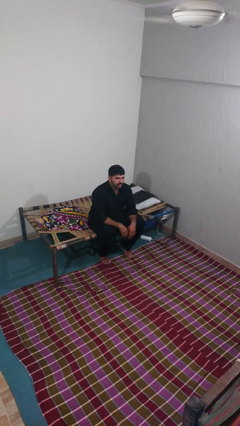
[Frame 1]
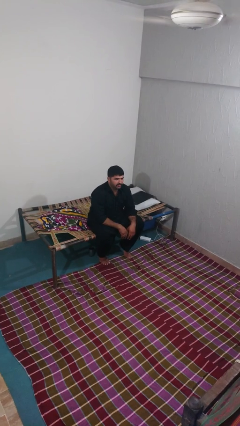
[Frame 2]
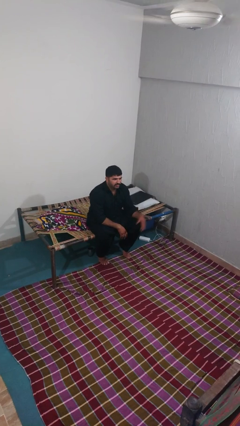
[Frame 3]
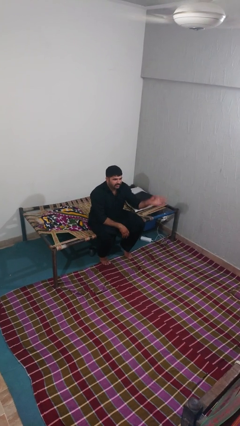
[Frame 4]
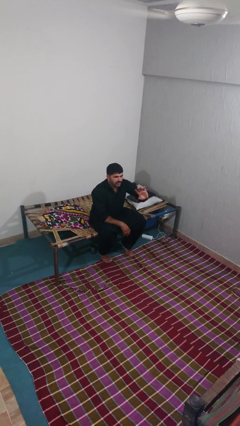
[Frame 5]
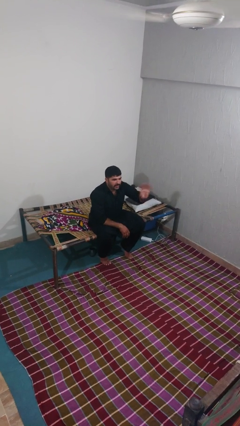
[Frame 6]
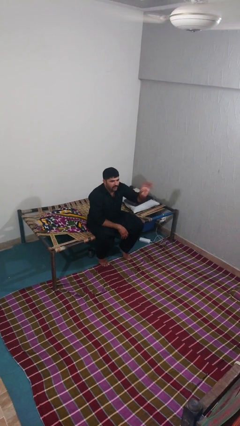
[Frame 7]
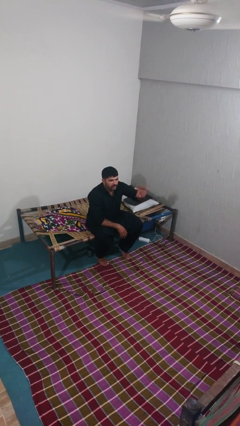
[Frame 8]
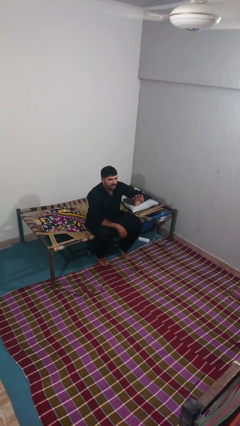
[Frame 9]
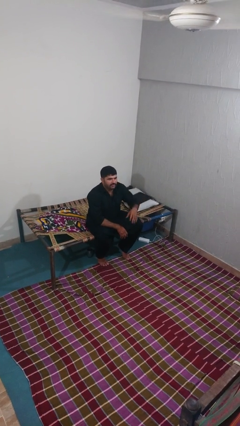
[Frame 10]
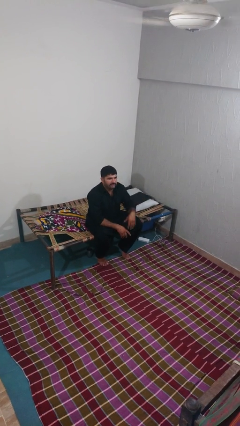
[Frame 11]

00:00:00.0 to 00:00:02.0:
person waves at person

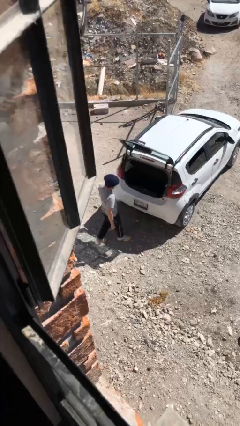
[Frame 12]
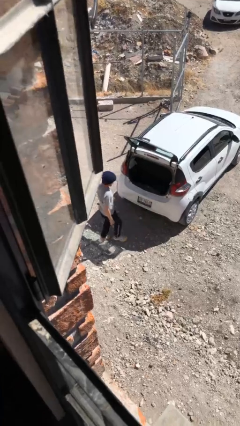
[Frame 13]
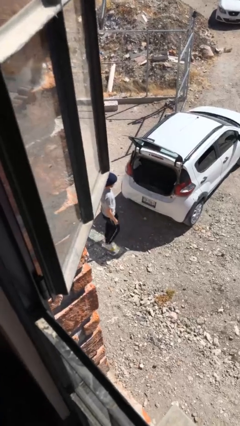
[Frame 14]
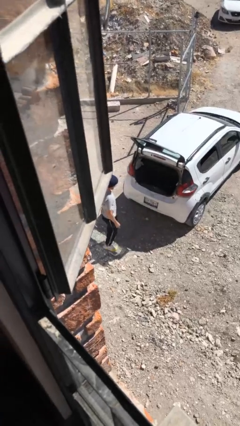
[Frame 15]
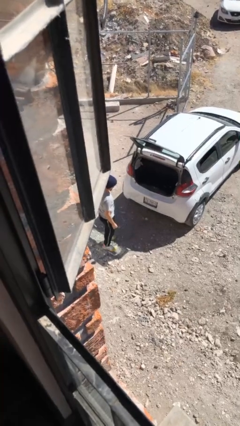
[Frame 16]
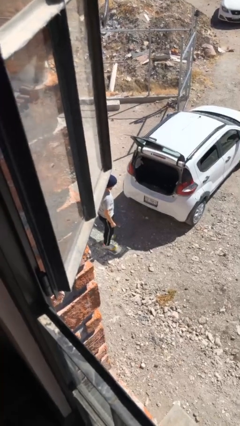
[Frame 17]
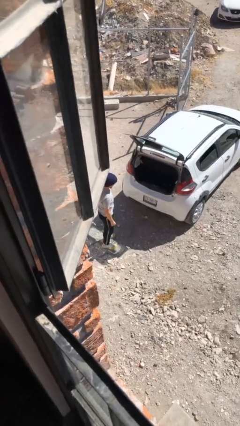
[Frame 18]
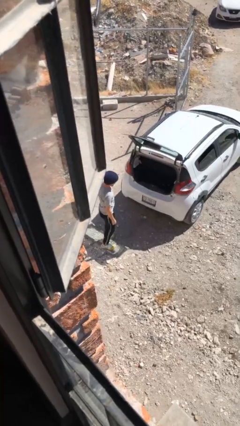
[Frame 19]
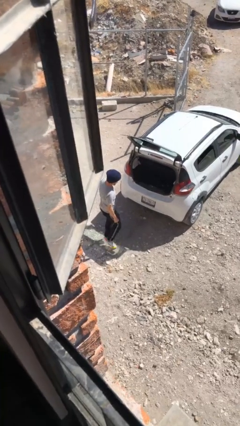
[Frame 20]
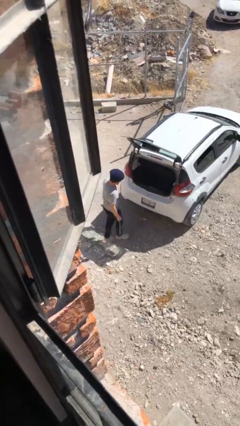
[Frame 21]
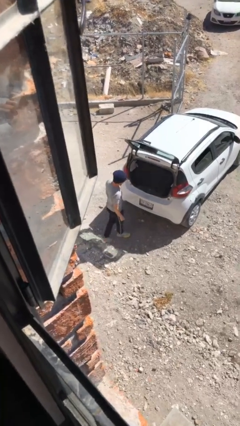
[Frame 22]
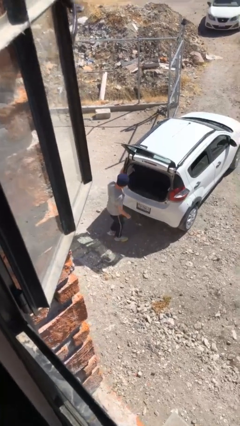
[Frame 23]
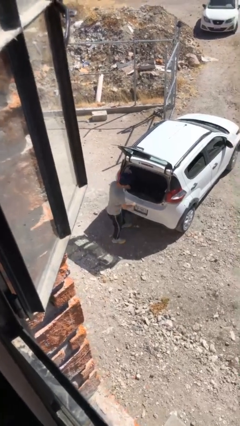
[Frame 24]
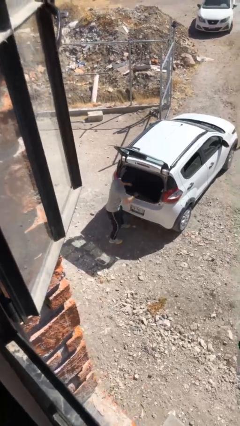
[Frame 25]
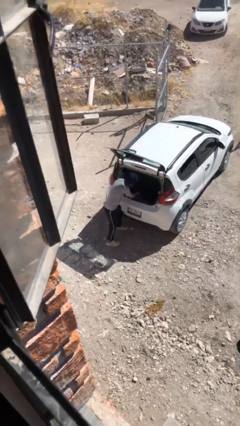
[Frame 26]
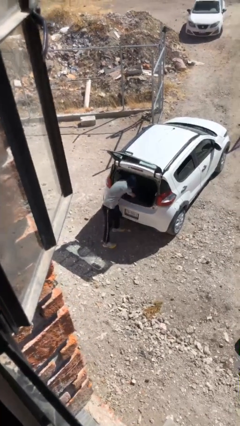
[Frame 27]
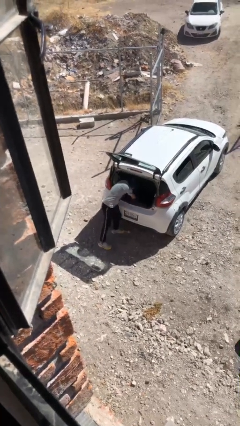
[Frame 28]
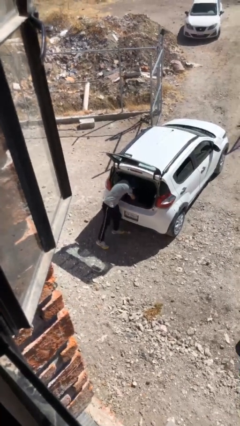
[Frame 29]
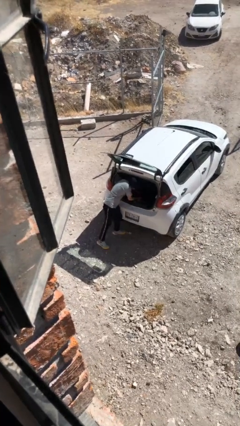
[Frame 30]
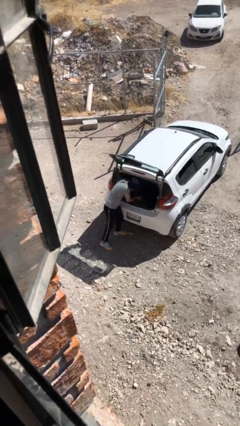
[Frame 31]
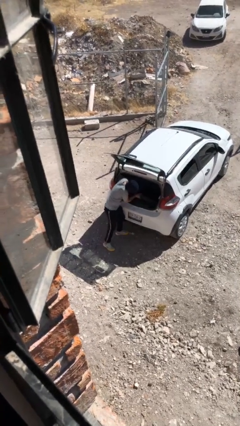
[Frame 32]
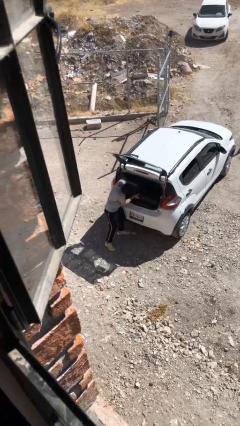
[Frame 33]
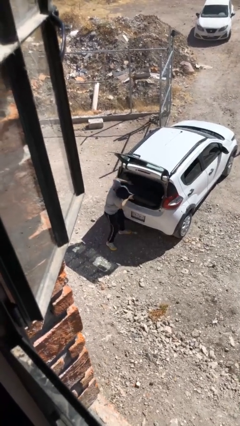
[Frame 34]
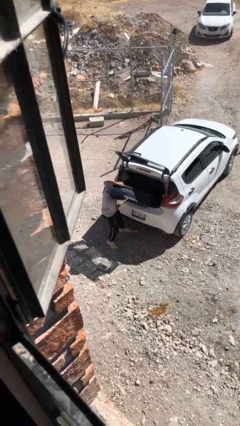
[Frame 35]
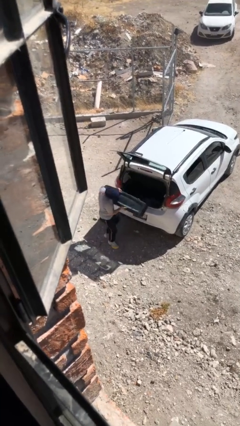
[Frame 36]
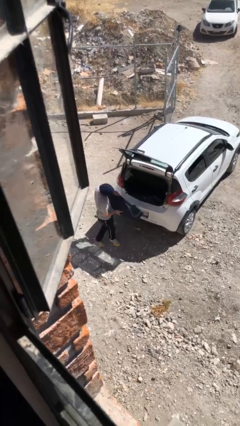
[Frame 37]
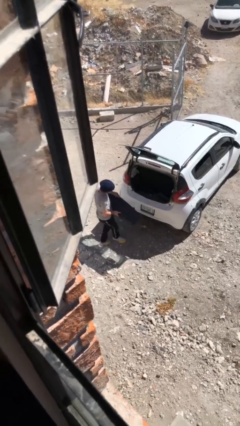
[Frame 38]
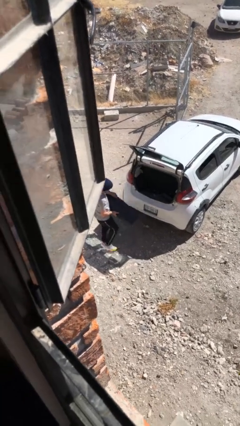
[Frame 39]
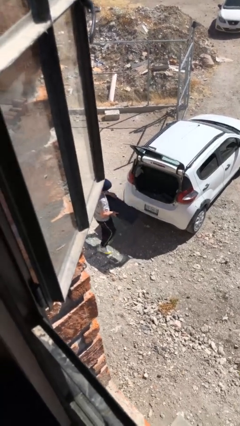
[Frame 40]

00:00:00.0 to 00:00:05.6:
person unloads car

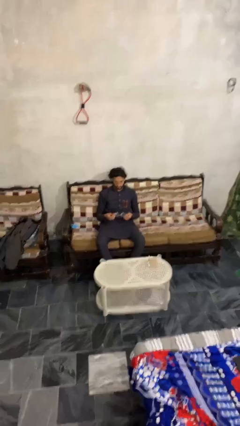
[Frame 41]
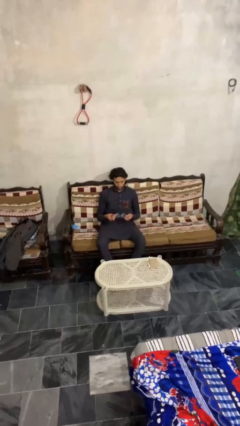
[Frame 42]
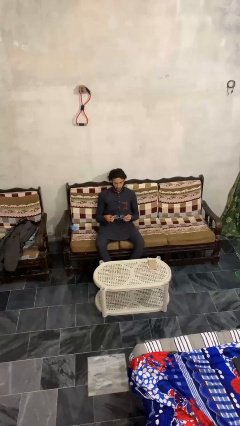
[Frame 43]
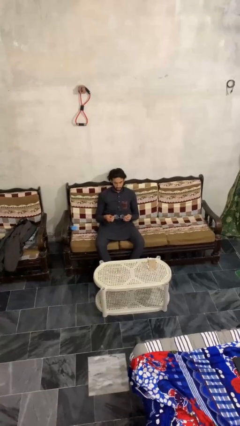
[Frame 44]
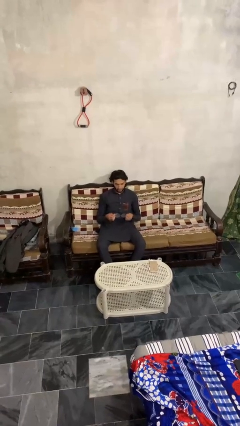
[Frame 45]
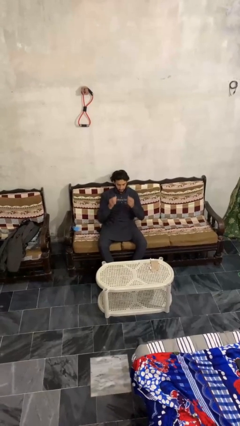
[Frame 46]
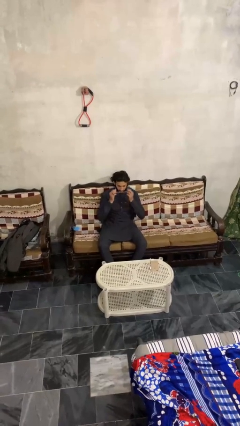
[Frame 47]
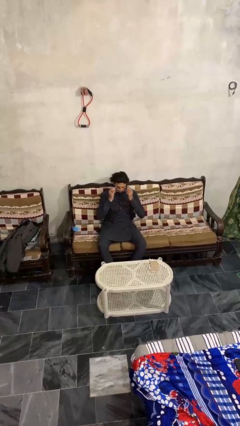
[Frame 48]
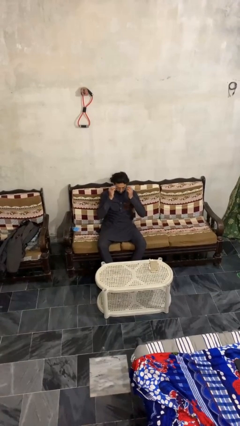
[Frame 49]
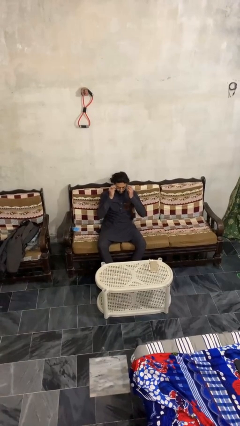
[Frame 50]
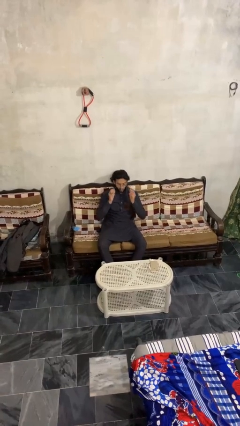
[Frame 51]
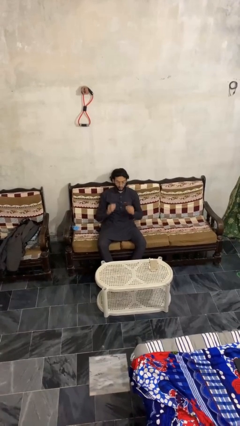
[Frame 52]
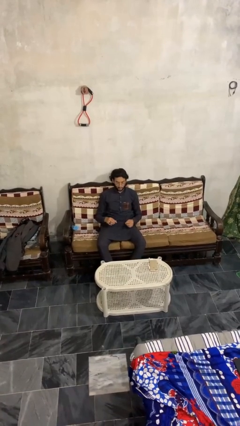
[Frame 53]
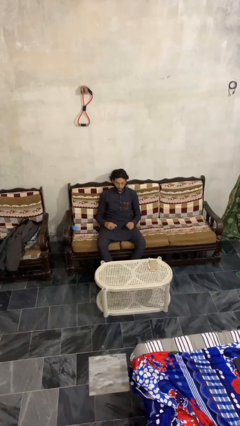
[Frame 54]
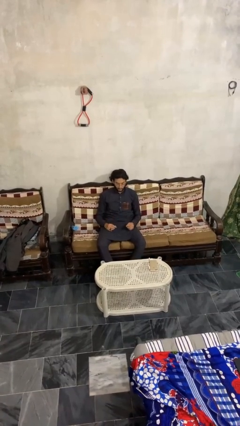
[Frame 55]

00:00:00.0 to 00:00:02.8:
person puts on glasses

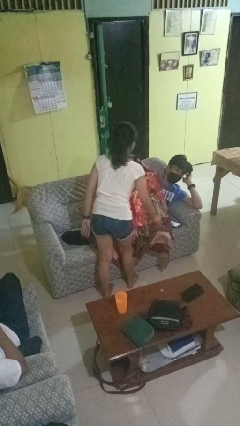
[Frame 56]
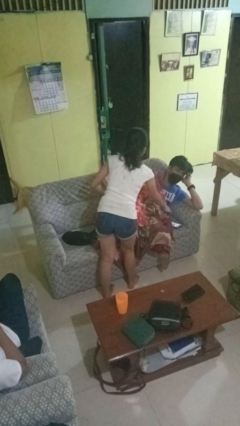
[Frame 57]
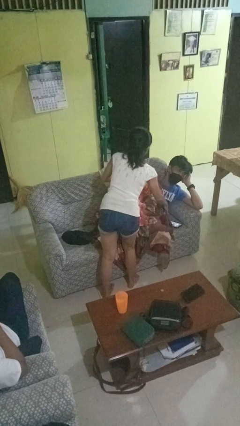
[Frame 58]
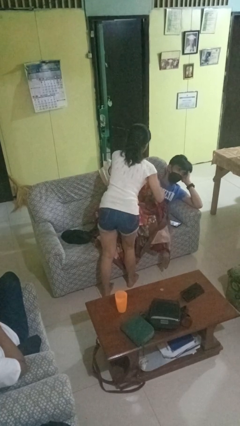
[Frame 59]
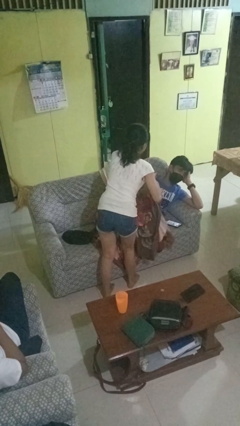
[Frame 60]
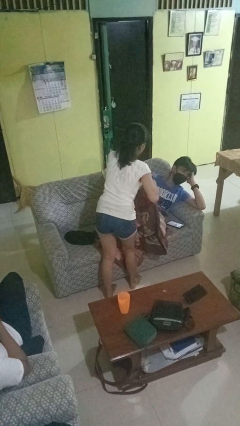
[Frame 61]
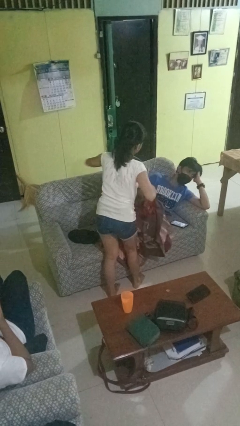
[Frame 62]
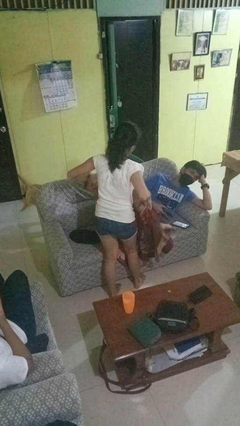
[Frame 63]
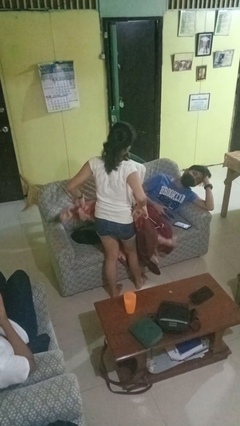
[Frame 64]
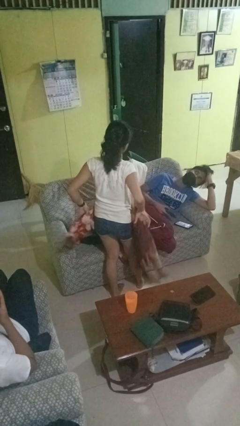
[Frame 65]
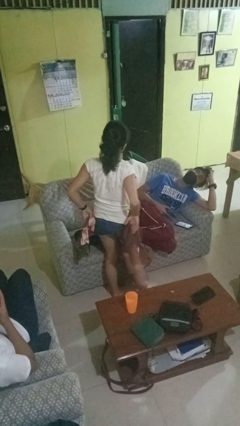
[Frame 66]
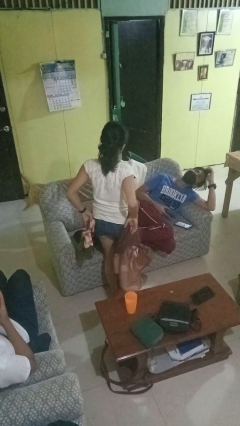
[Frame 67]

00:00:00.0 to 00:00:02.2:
person uncovers friend with blanket

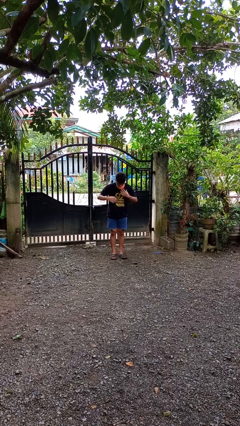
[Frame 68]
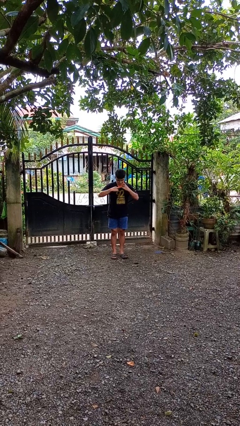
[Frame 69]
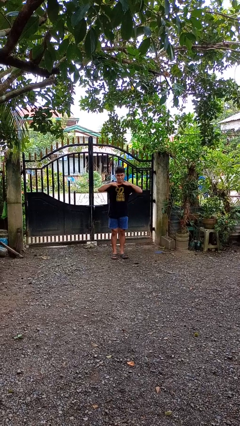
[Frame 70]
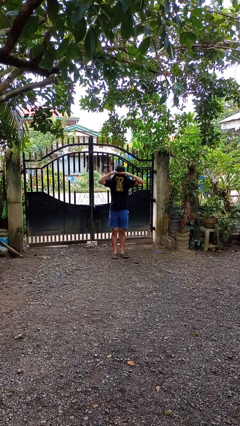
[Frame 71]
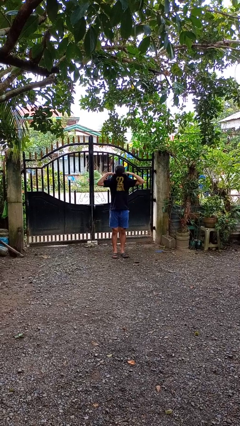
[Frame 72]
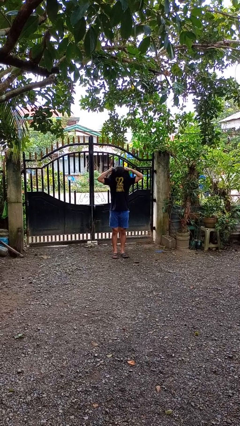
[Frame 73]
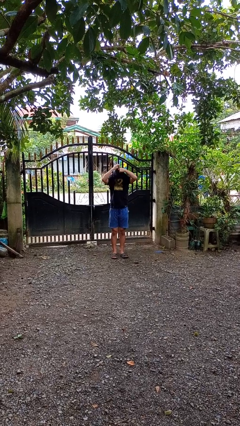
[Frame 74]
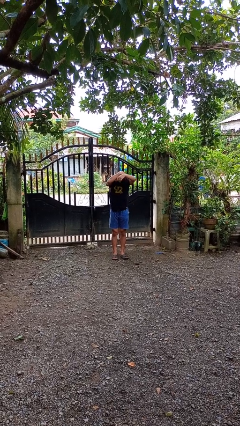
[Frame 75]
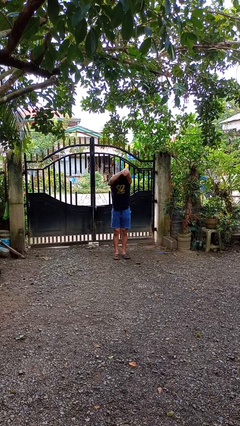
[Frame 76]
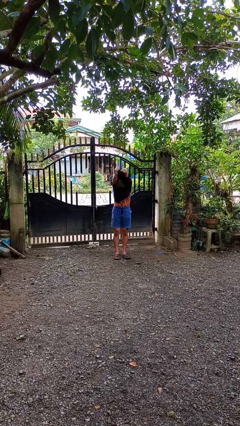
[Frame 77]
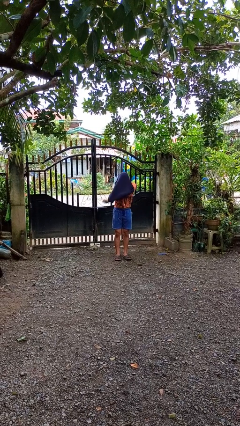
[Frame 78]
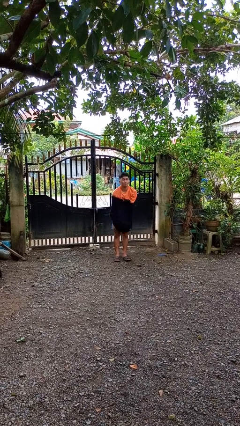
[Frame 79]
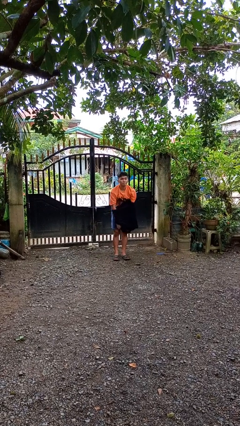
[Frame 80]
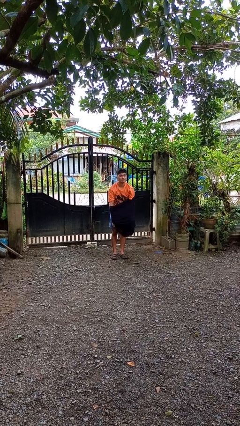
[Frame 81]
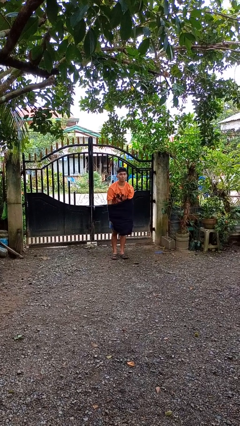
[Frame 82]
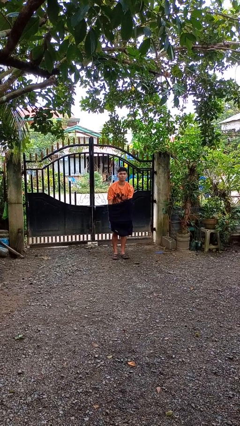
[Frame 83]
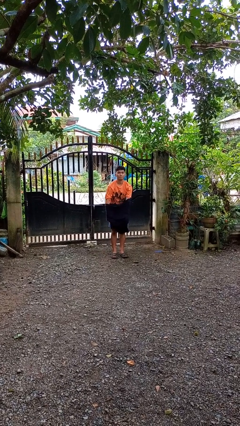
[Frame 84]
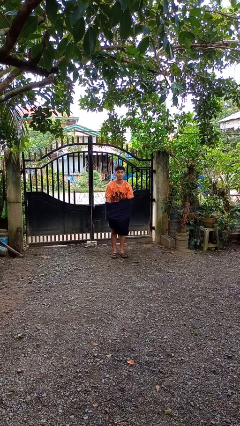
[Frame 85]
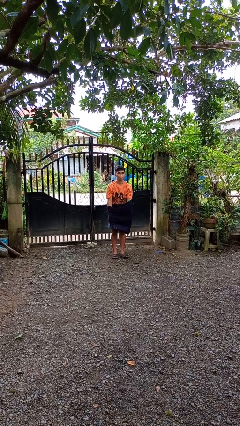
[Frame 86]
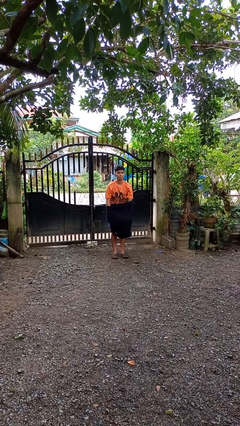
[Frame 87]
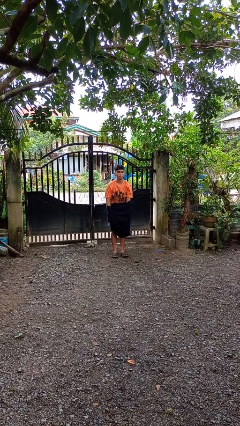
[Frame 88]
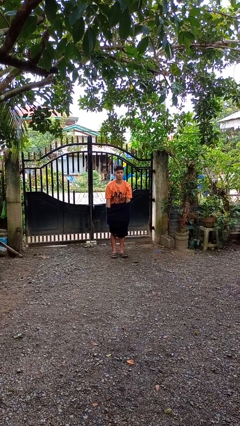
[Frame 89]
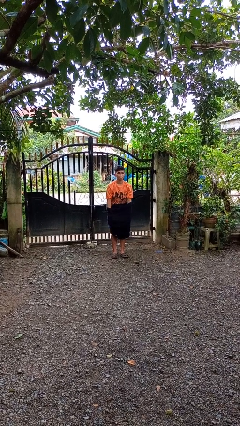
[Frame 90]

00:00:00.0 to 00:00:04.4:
person takes off shirt

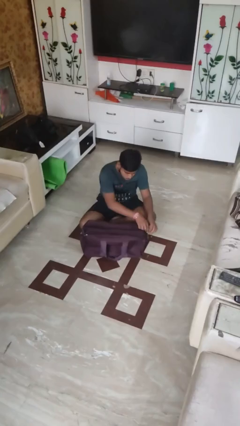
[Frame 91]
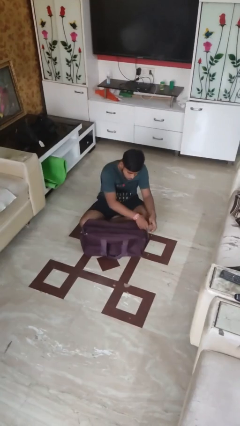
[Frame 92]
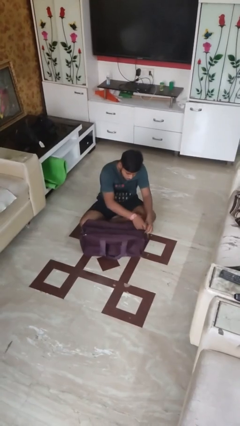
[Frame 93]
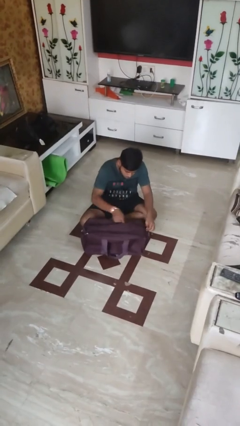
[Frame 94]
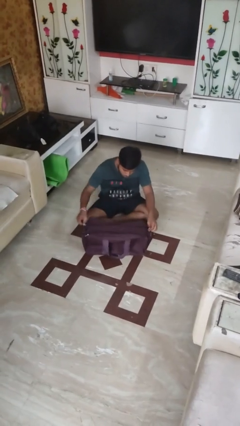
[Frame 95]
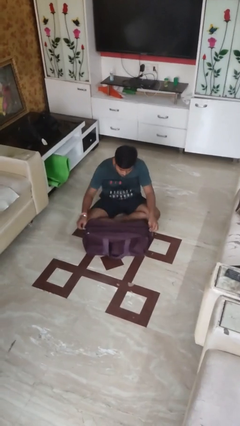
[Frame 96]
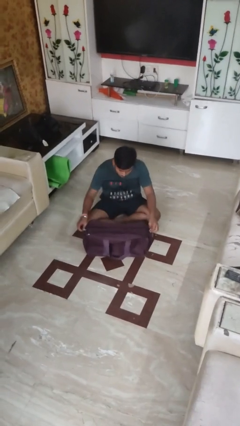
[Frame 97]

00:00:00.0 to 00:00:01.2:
person opens suitcase
